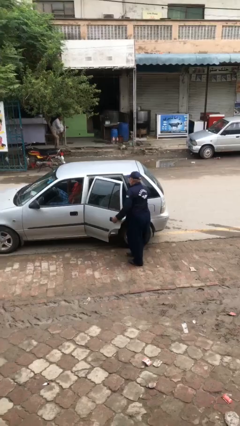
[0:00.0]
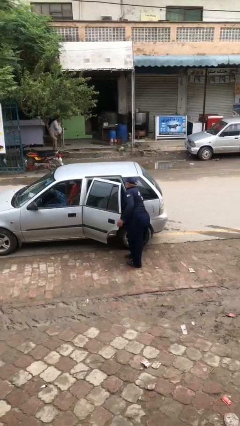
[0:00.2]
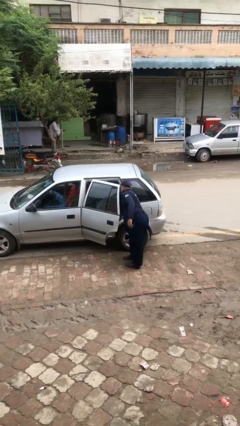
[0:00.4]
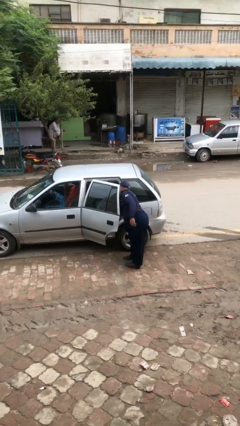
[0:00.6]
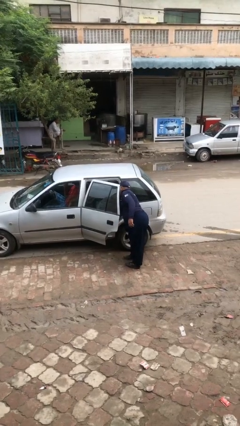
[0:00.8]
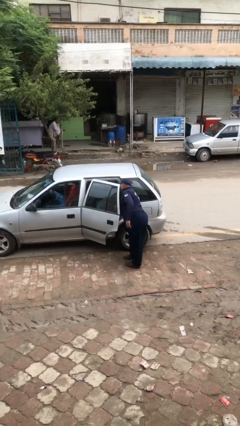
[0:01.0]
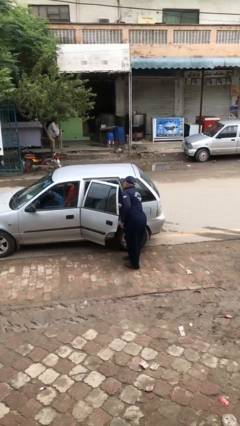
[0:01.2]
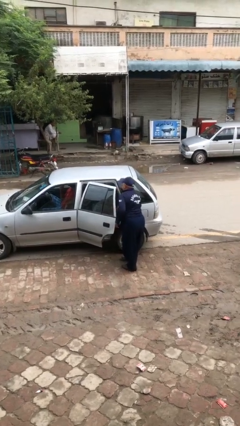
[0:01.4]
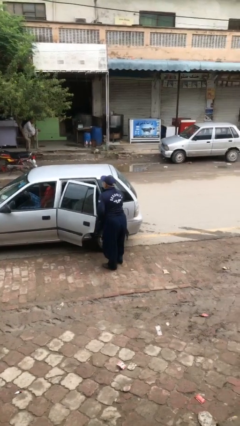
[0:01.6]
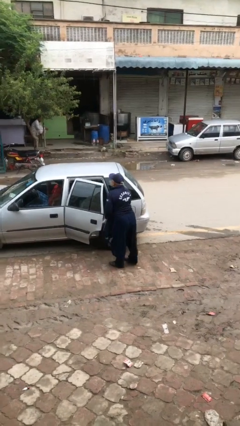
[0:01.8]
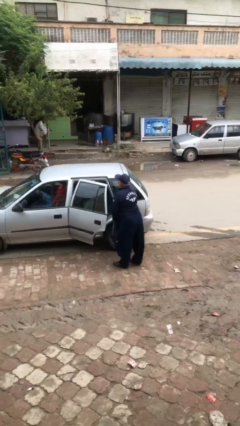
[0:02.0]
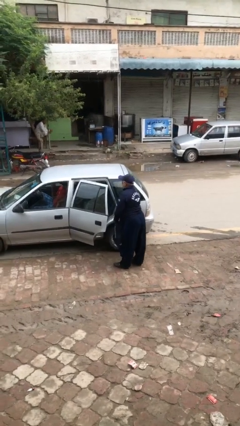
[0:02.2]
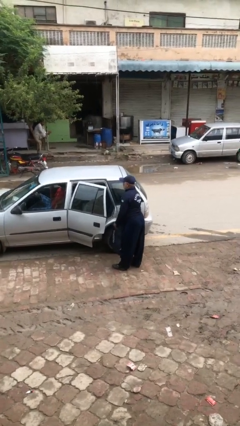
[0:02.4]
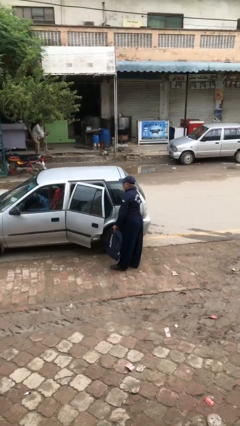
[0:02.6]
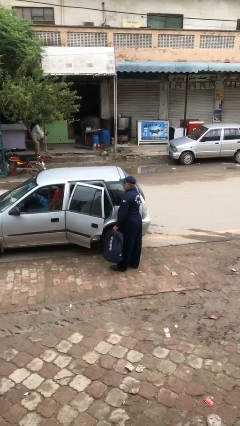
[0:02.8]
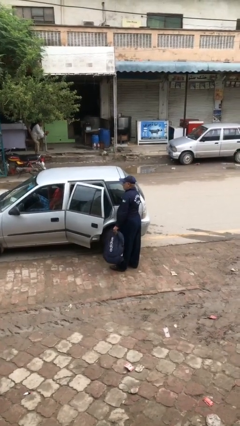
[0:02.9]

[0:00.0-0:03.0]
person unloads car

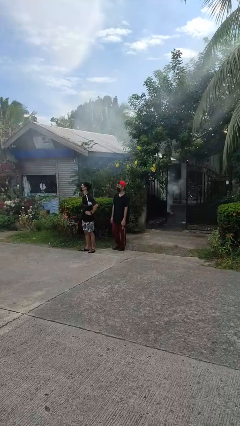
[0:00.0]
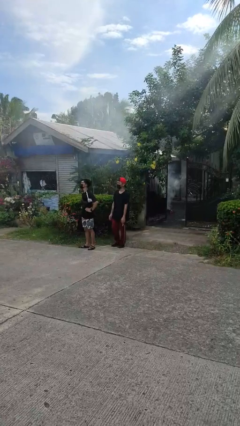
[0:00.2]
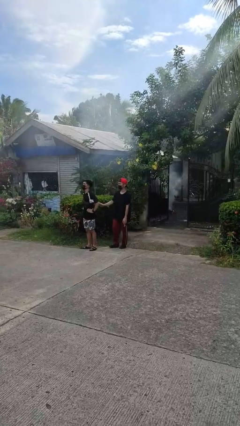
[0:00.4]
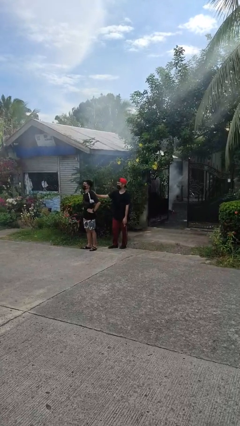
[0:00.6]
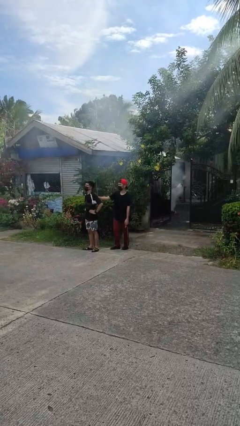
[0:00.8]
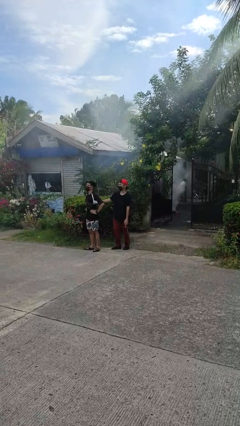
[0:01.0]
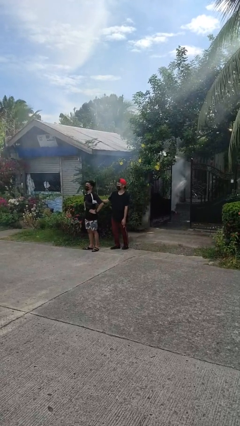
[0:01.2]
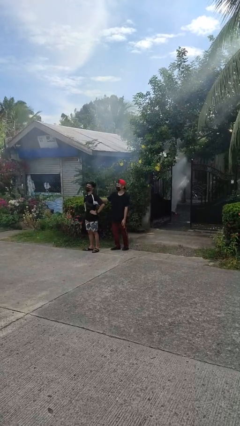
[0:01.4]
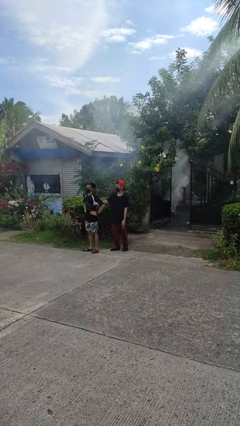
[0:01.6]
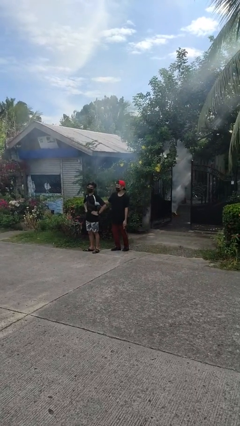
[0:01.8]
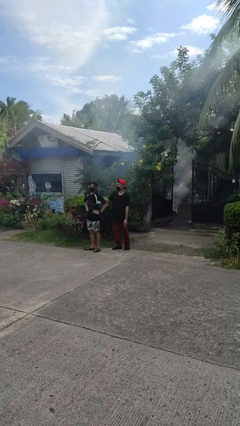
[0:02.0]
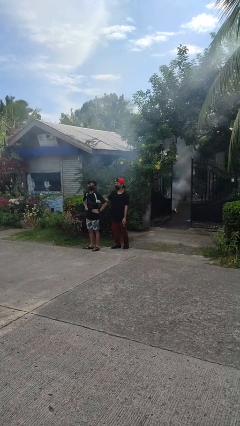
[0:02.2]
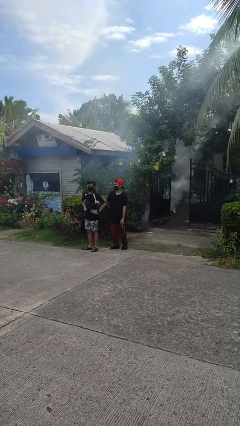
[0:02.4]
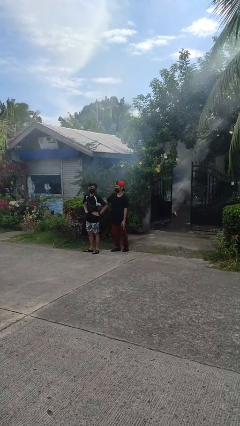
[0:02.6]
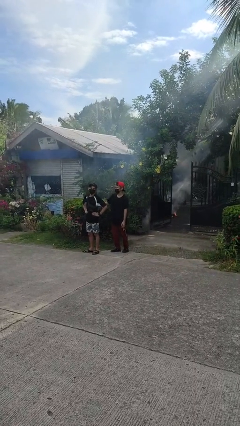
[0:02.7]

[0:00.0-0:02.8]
person touches back of person

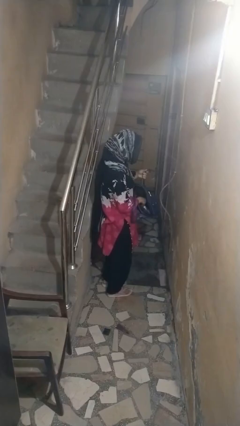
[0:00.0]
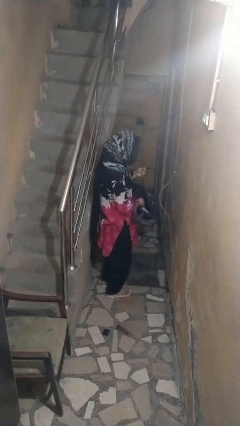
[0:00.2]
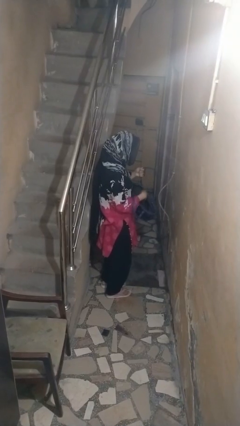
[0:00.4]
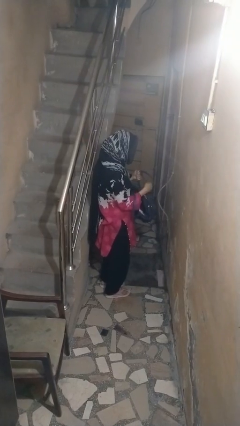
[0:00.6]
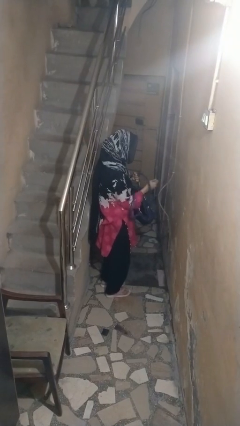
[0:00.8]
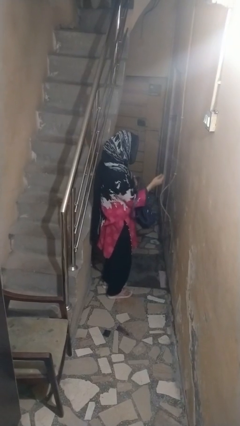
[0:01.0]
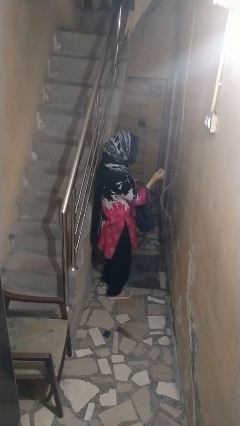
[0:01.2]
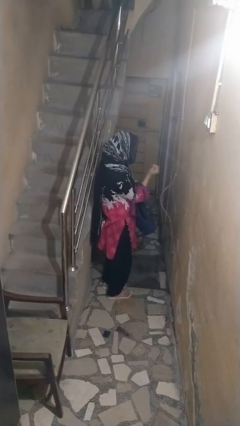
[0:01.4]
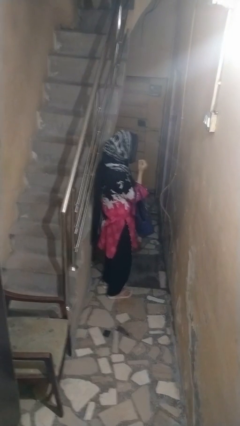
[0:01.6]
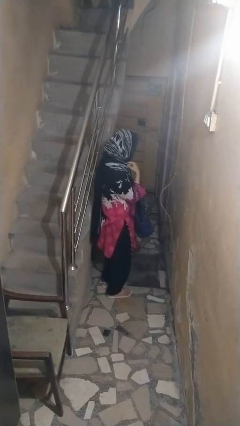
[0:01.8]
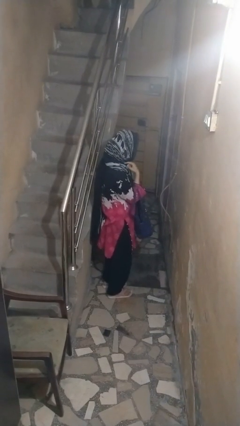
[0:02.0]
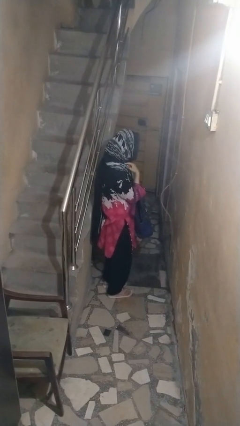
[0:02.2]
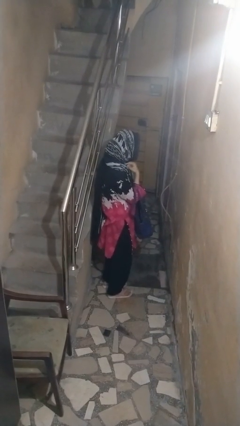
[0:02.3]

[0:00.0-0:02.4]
person puts object into purse

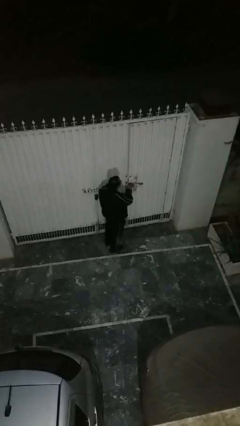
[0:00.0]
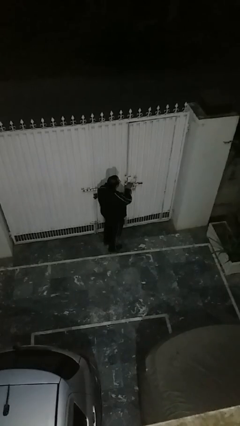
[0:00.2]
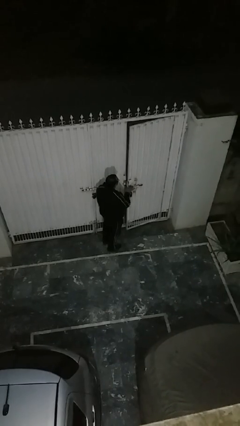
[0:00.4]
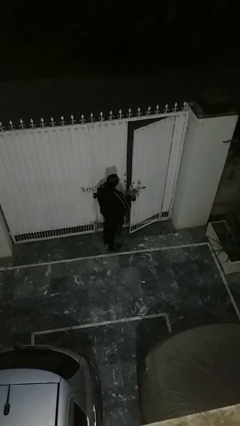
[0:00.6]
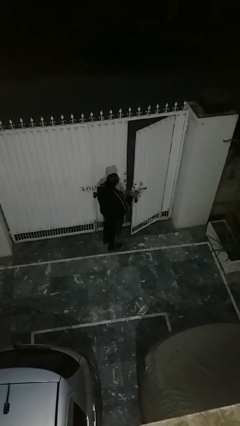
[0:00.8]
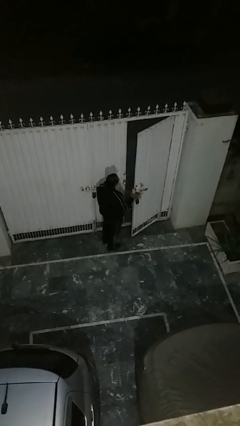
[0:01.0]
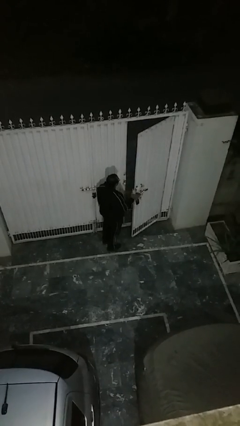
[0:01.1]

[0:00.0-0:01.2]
person opens facility door

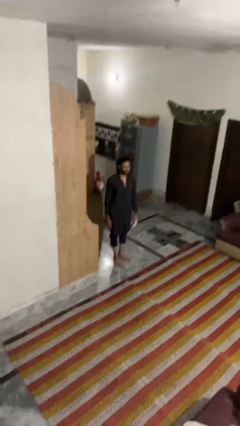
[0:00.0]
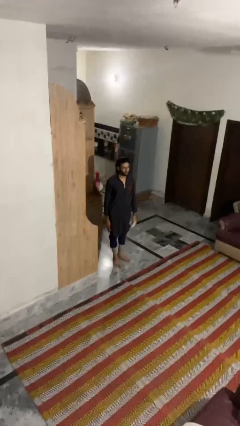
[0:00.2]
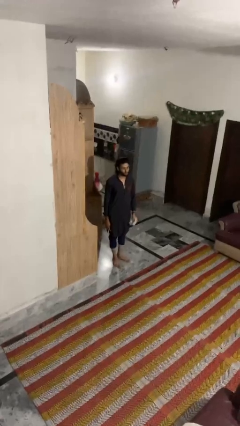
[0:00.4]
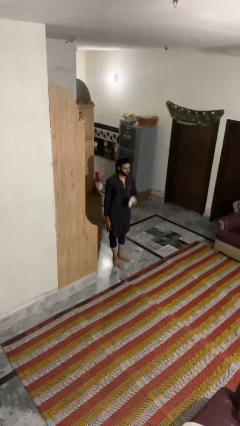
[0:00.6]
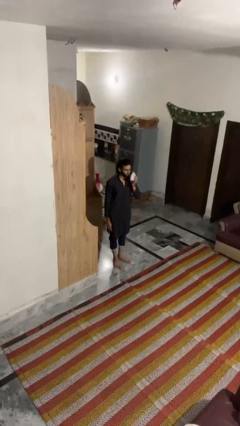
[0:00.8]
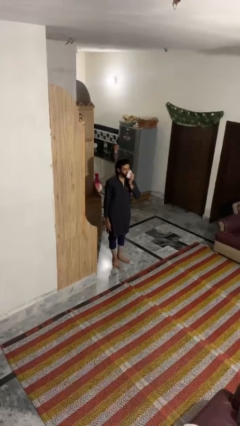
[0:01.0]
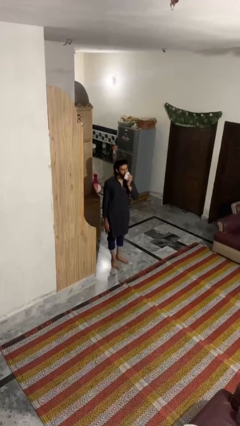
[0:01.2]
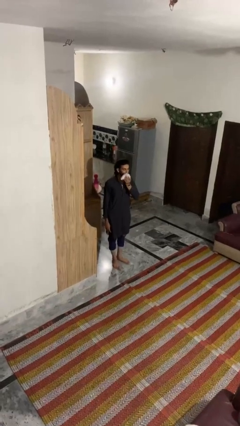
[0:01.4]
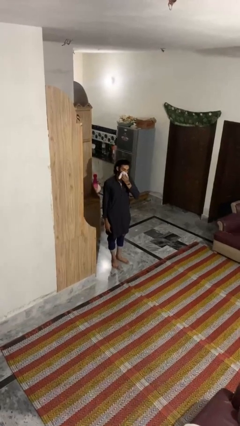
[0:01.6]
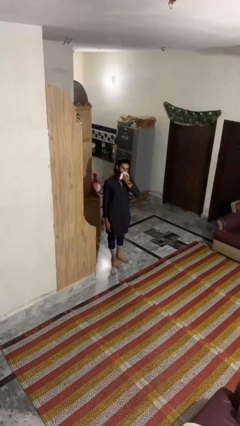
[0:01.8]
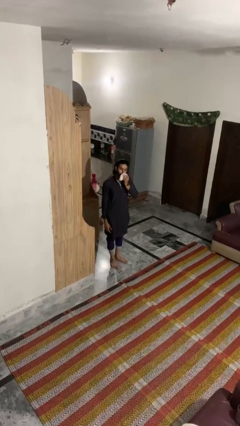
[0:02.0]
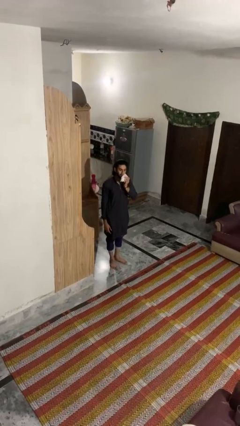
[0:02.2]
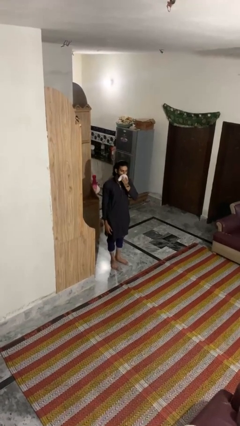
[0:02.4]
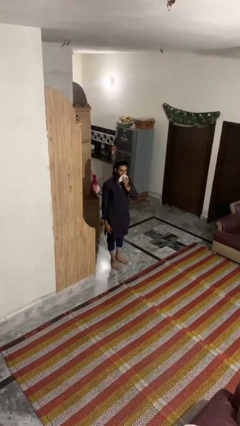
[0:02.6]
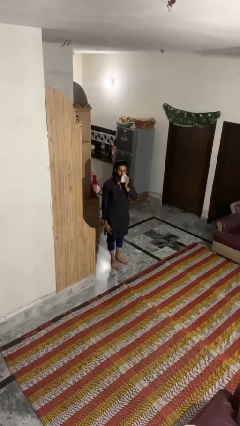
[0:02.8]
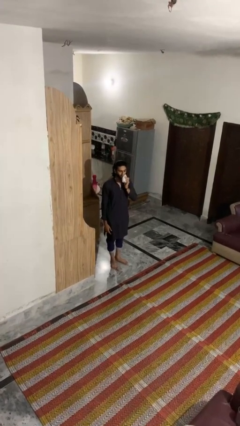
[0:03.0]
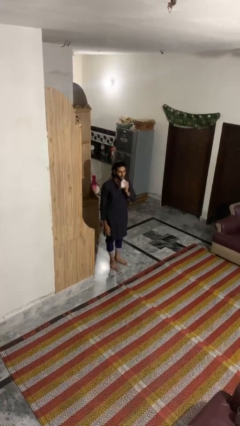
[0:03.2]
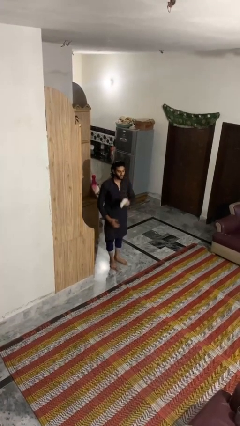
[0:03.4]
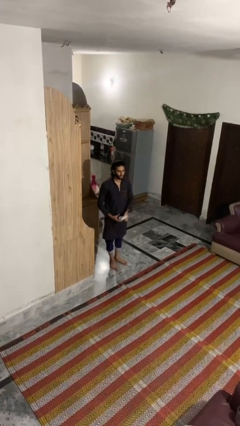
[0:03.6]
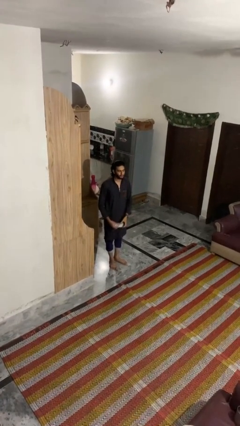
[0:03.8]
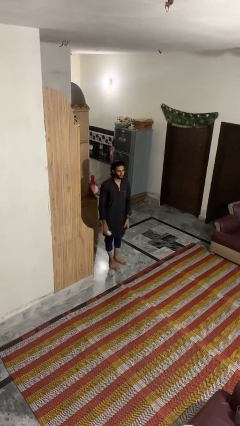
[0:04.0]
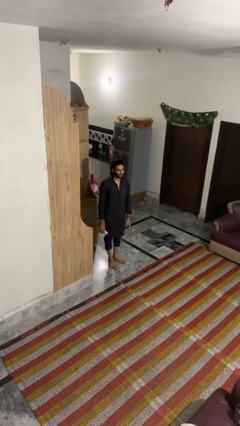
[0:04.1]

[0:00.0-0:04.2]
person wipes mouth with napkin

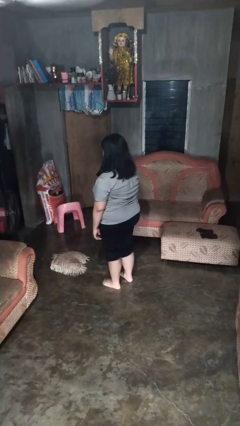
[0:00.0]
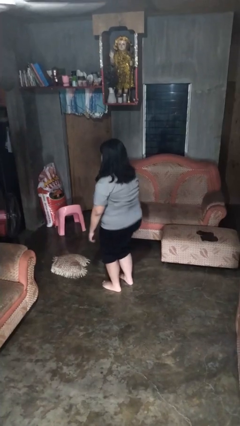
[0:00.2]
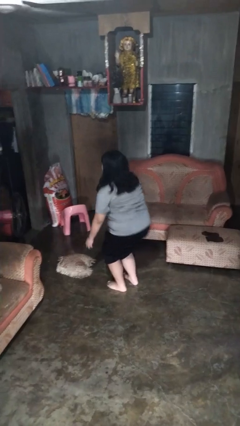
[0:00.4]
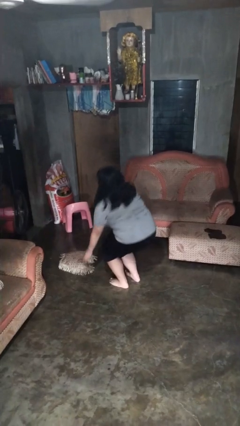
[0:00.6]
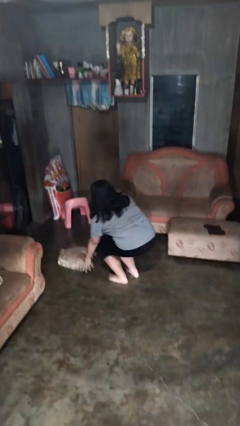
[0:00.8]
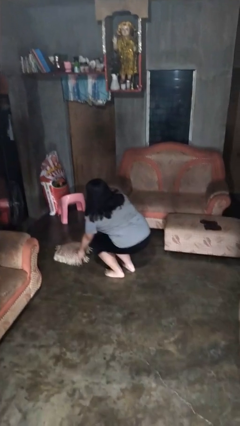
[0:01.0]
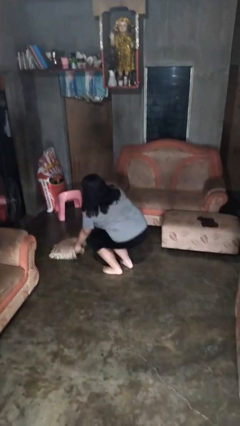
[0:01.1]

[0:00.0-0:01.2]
person picks up object from floor

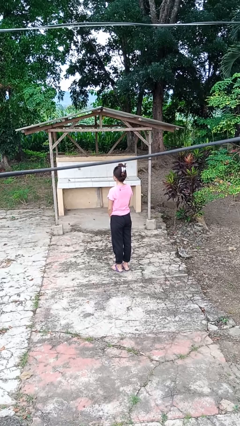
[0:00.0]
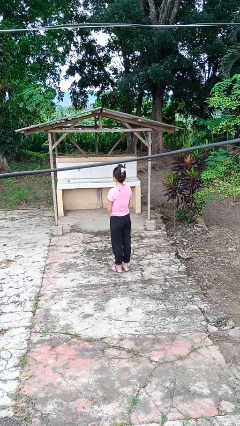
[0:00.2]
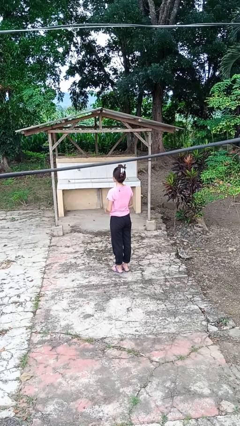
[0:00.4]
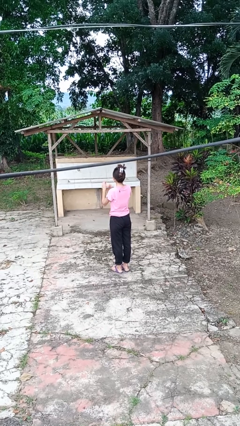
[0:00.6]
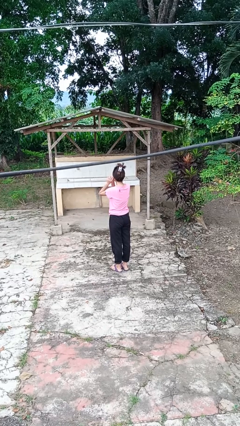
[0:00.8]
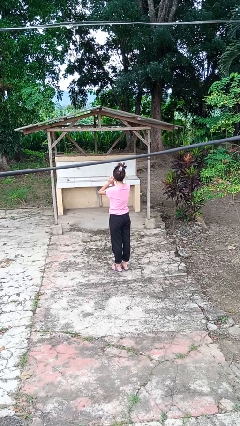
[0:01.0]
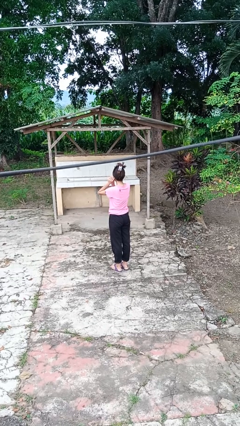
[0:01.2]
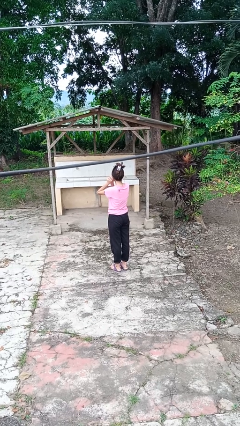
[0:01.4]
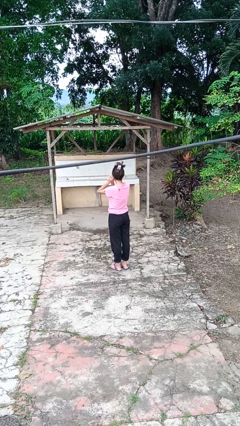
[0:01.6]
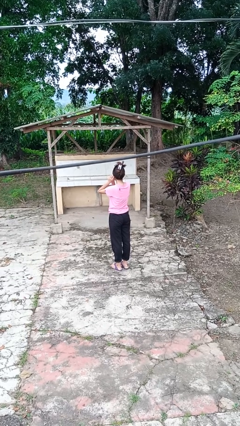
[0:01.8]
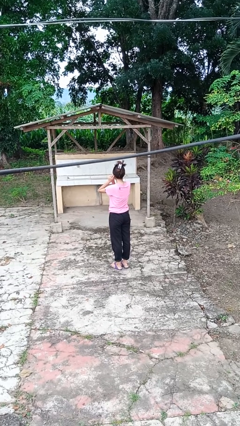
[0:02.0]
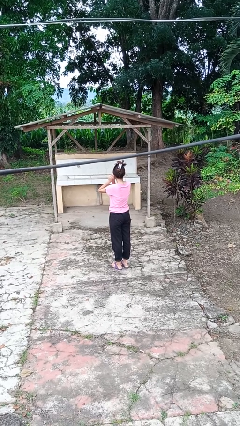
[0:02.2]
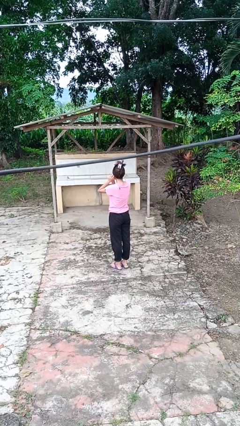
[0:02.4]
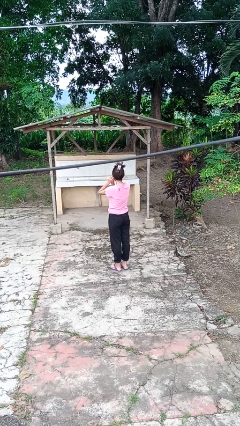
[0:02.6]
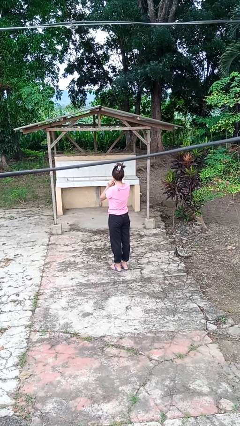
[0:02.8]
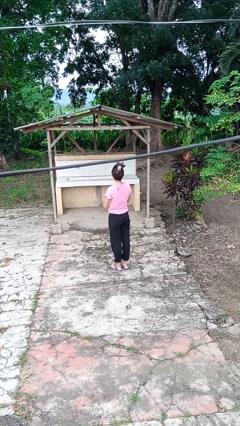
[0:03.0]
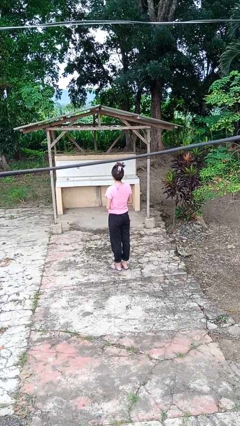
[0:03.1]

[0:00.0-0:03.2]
person puts on earrings
